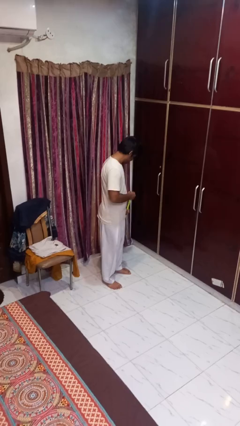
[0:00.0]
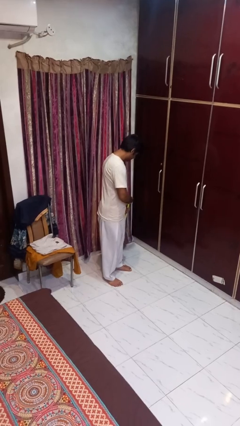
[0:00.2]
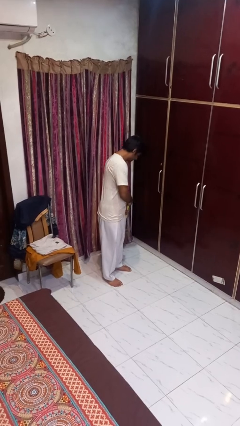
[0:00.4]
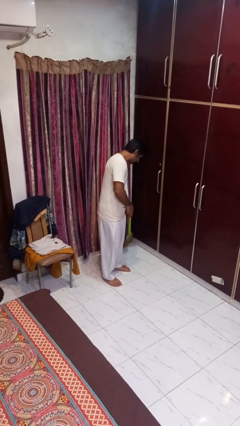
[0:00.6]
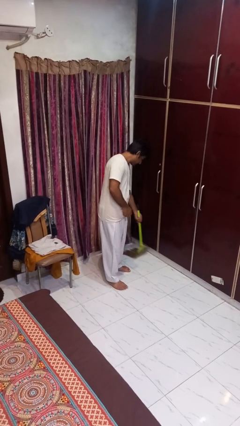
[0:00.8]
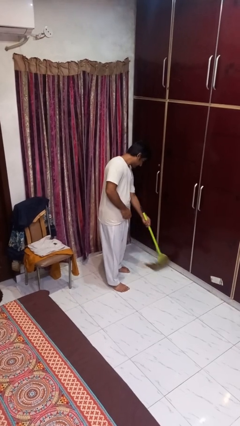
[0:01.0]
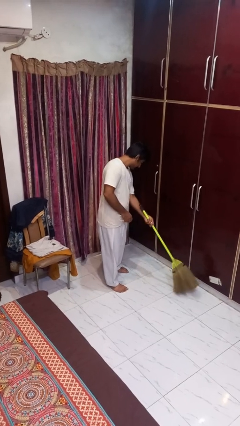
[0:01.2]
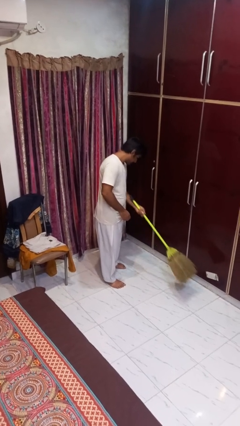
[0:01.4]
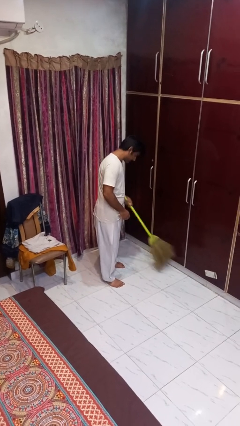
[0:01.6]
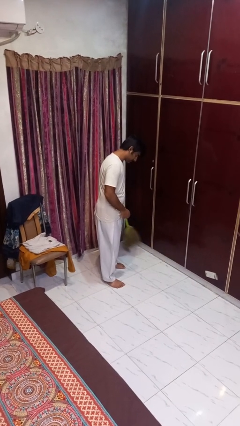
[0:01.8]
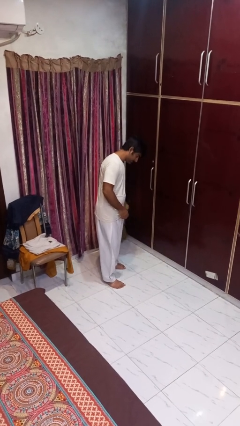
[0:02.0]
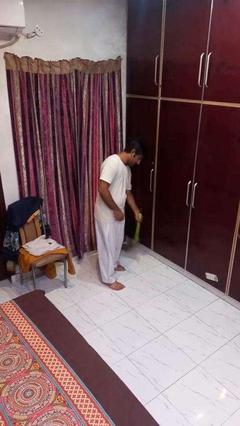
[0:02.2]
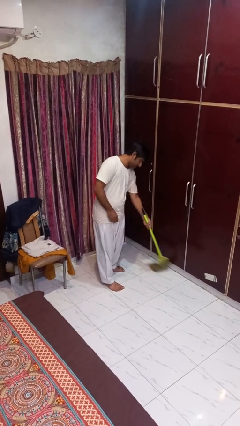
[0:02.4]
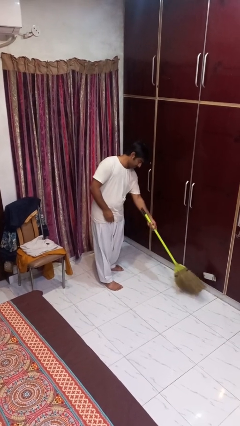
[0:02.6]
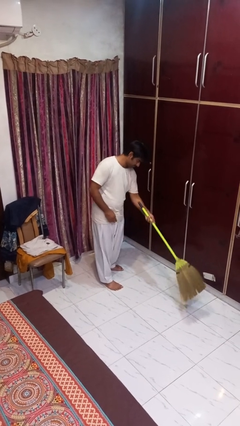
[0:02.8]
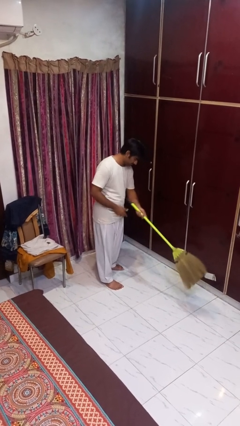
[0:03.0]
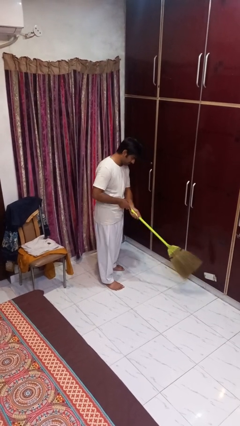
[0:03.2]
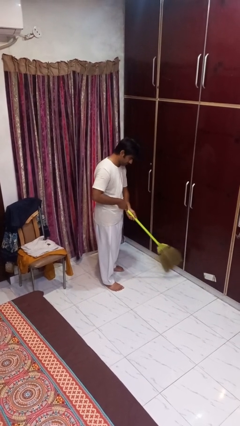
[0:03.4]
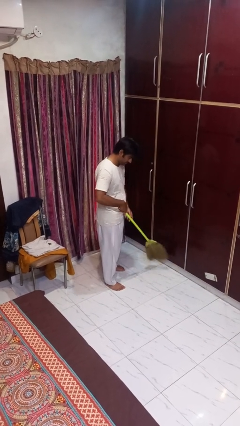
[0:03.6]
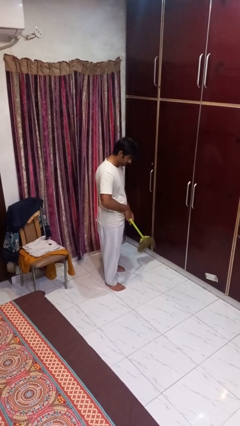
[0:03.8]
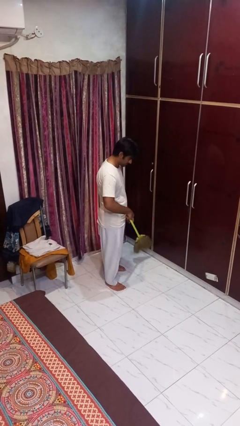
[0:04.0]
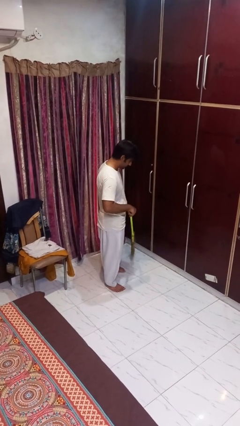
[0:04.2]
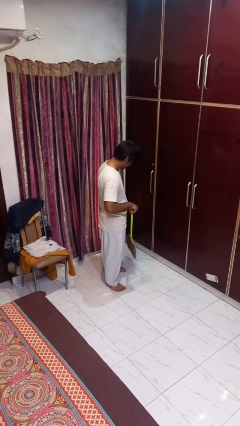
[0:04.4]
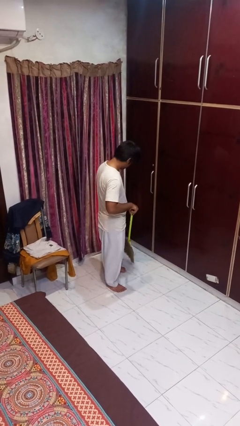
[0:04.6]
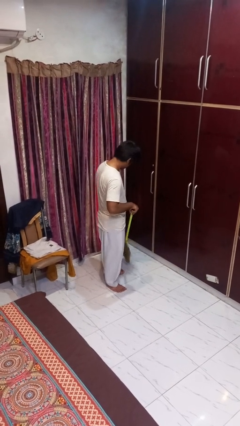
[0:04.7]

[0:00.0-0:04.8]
person sweeps floor

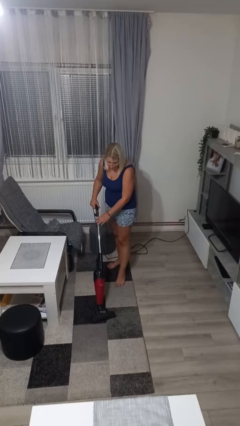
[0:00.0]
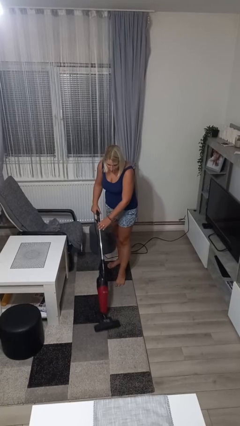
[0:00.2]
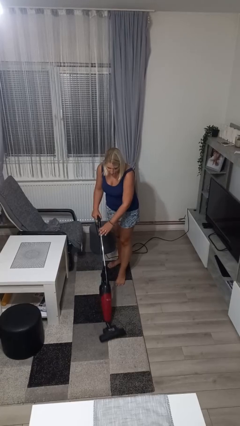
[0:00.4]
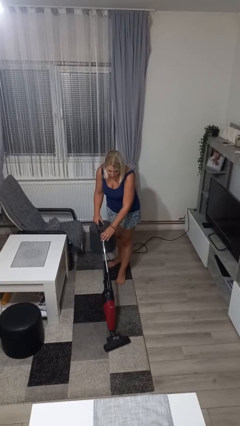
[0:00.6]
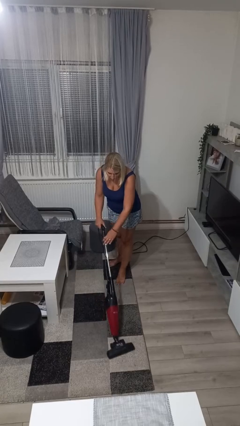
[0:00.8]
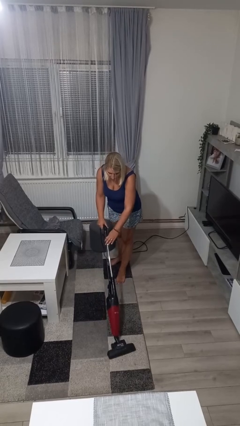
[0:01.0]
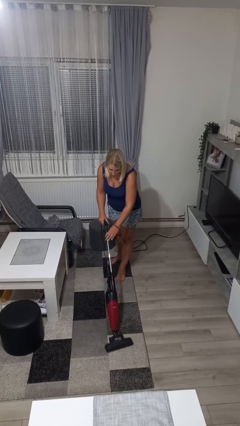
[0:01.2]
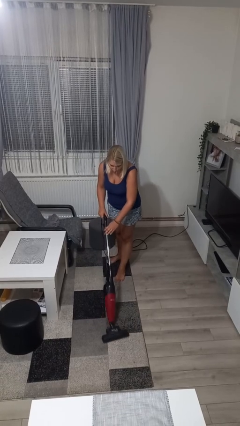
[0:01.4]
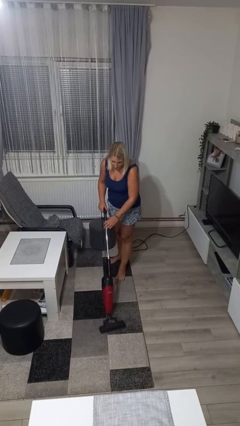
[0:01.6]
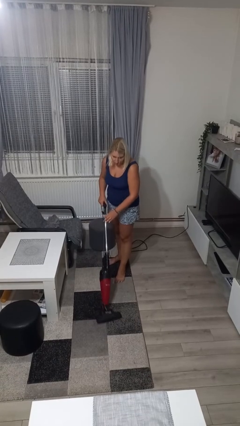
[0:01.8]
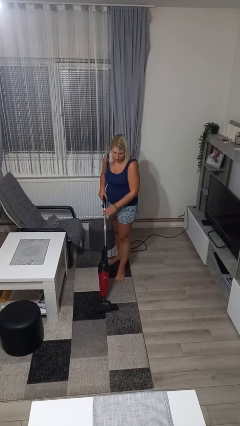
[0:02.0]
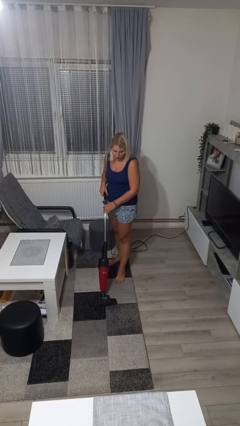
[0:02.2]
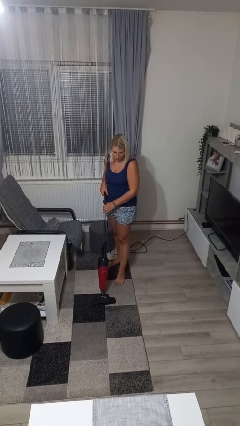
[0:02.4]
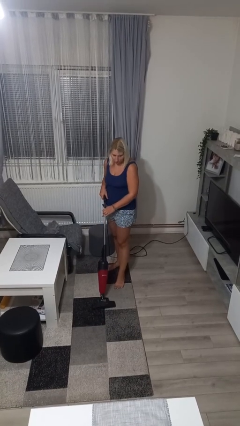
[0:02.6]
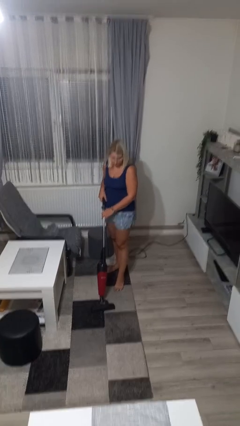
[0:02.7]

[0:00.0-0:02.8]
person vacuums carpet

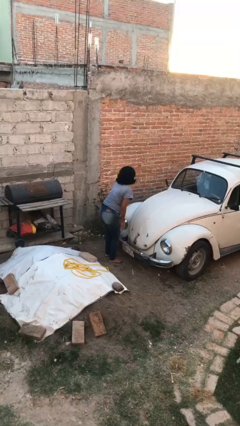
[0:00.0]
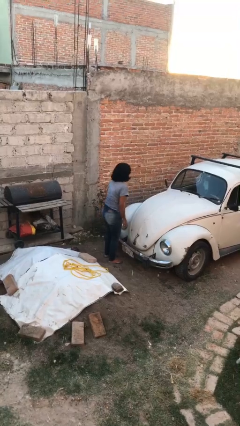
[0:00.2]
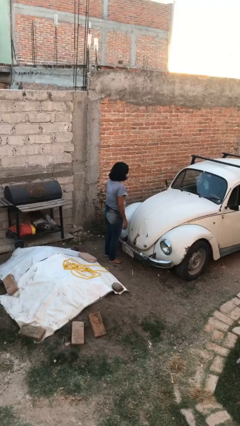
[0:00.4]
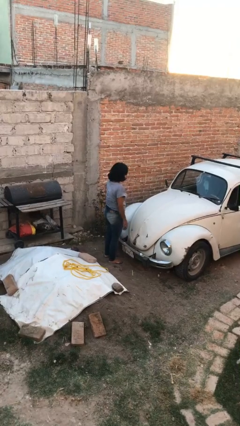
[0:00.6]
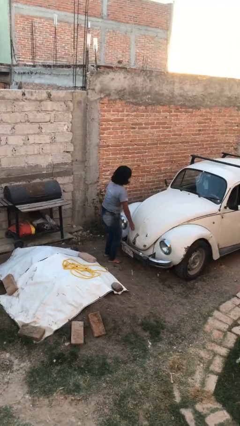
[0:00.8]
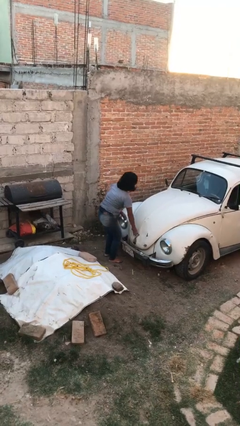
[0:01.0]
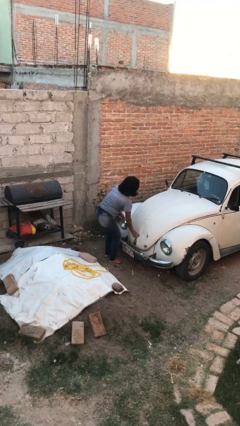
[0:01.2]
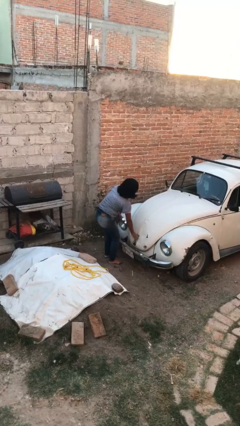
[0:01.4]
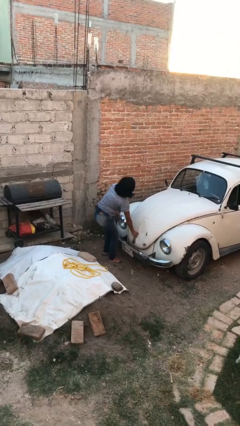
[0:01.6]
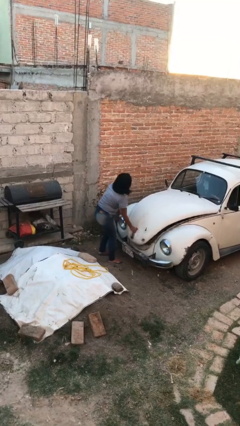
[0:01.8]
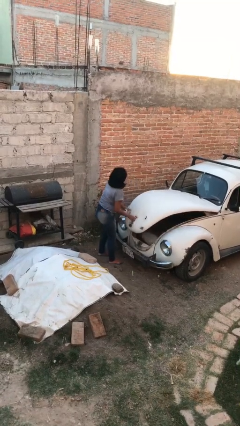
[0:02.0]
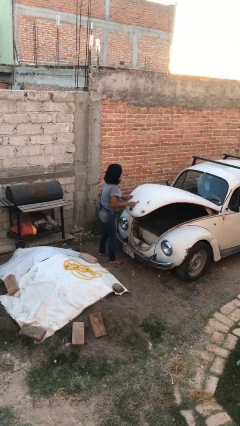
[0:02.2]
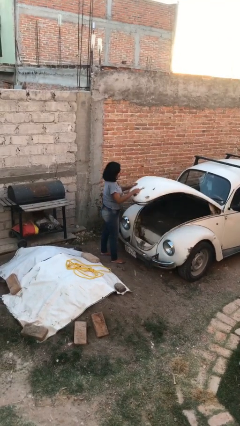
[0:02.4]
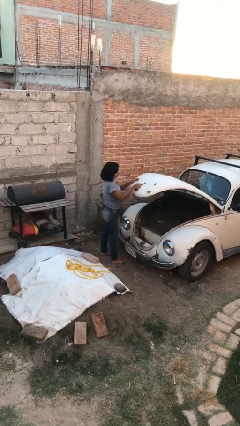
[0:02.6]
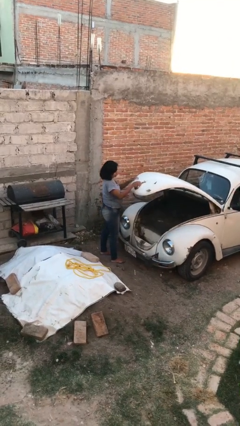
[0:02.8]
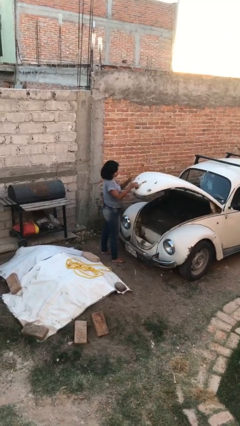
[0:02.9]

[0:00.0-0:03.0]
person opens car trunk

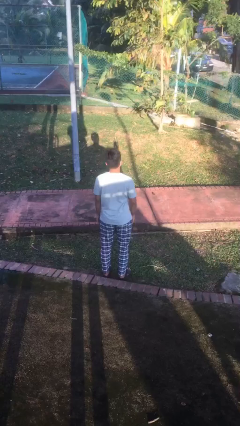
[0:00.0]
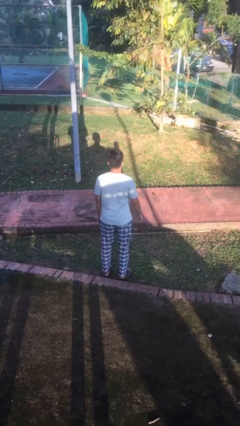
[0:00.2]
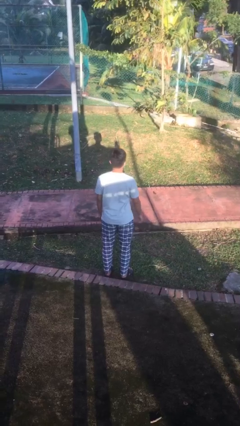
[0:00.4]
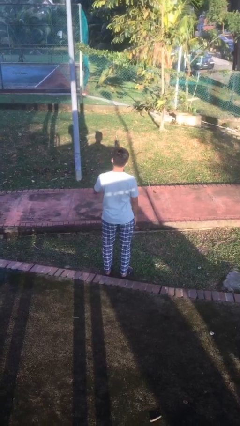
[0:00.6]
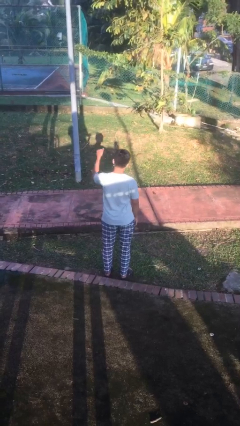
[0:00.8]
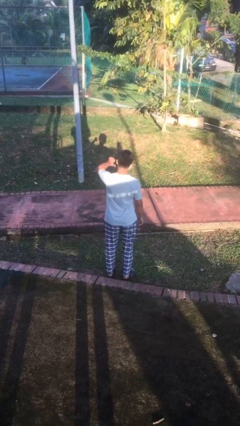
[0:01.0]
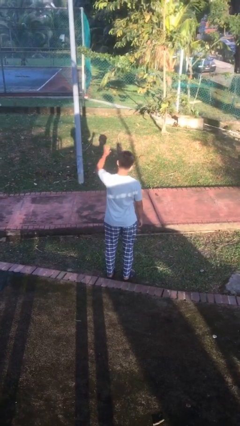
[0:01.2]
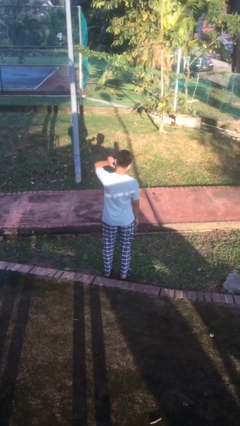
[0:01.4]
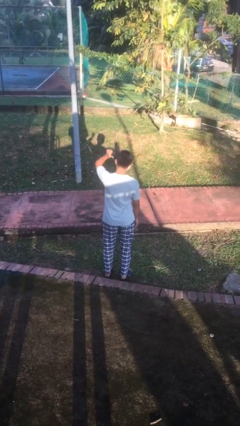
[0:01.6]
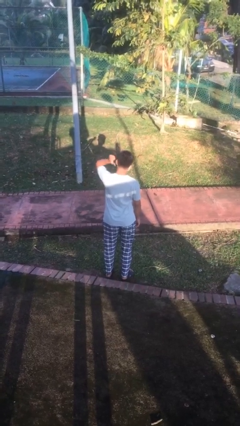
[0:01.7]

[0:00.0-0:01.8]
person gestures behind me

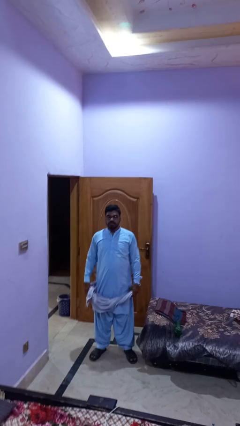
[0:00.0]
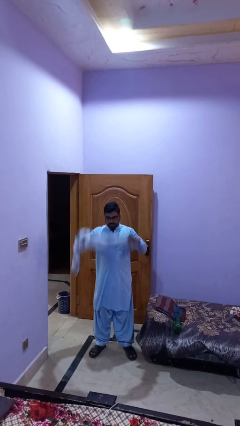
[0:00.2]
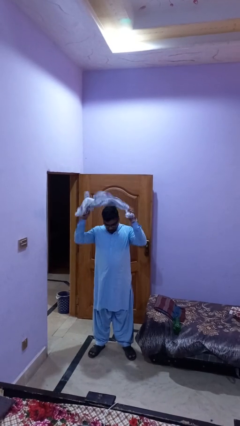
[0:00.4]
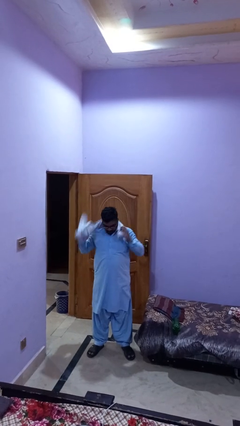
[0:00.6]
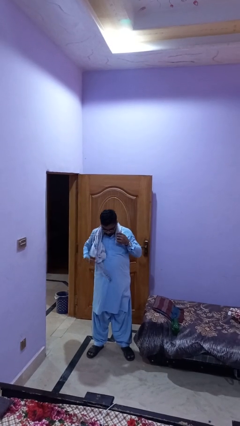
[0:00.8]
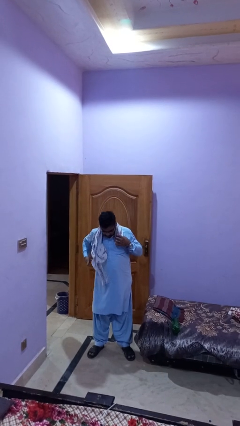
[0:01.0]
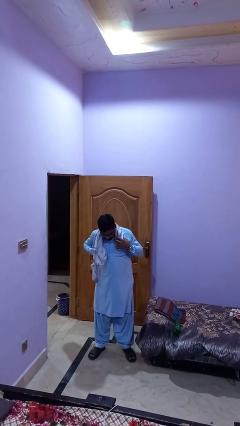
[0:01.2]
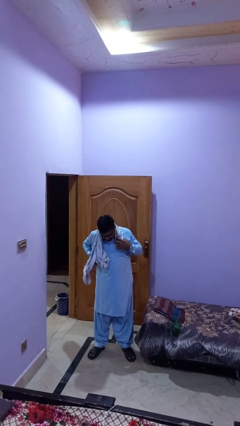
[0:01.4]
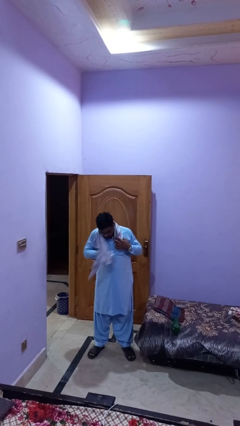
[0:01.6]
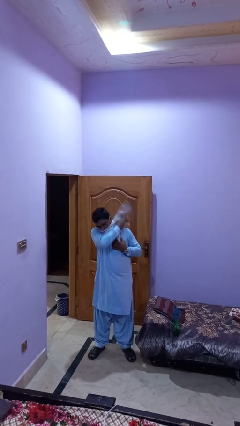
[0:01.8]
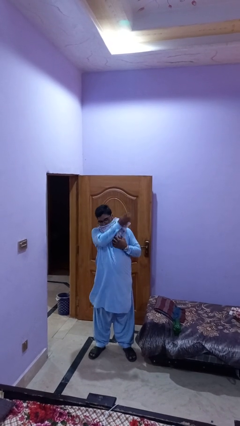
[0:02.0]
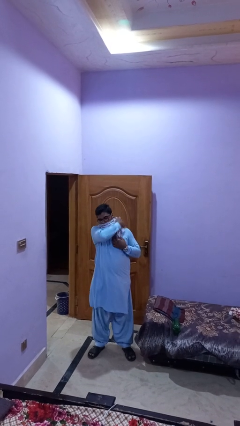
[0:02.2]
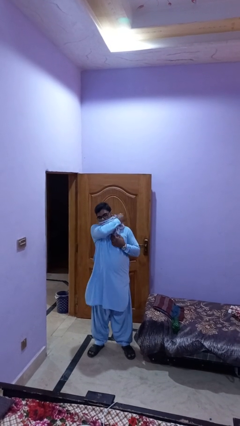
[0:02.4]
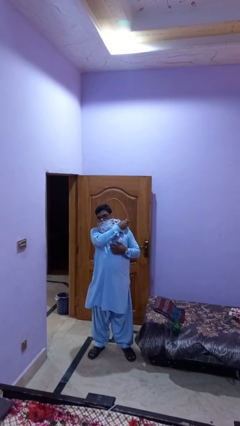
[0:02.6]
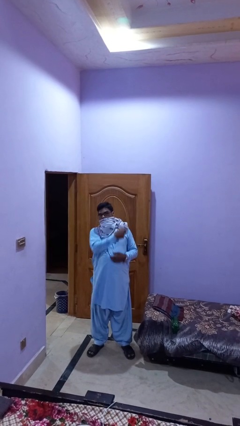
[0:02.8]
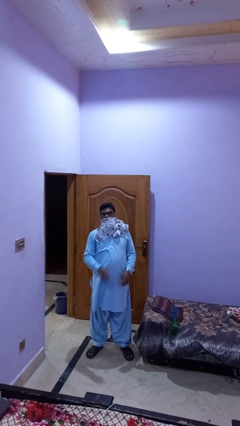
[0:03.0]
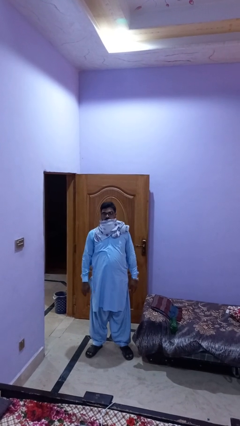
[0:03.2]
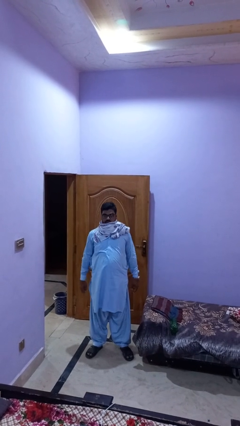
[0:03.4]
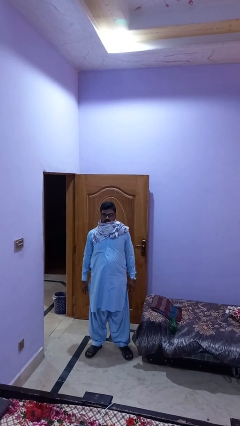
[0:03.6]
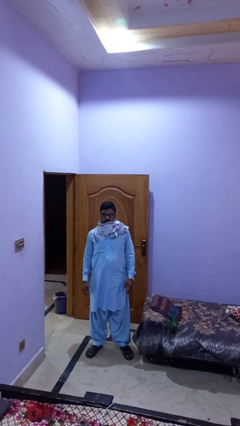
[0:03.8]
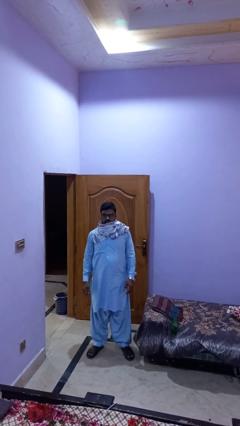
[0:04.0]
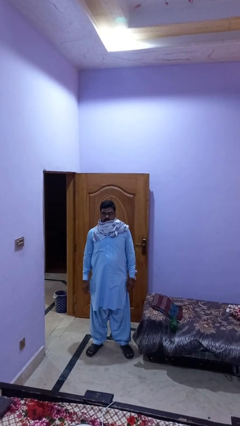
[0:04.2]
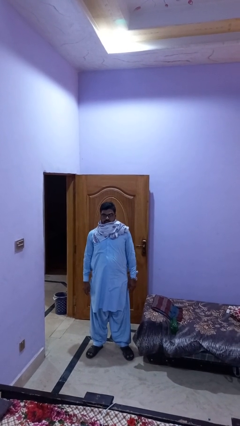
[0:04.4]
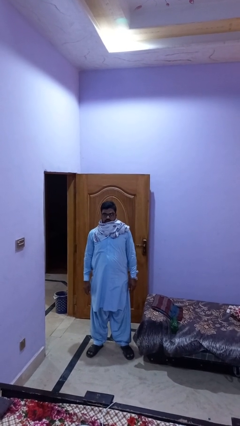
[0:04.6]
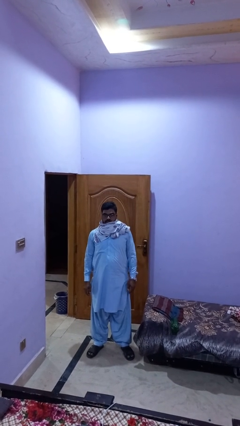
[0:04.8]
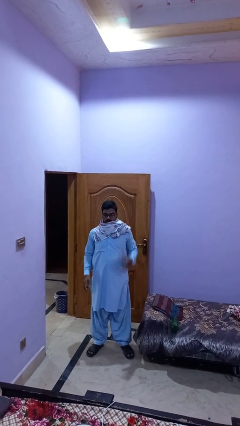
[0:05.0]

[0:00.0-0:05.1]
person puts on scarf
